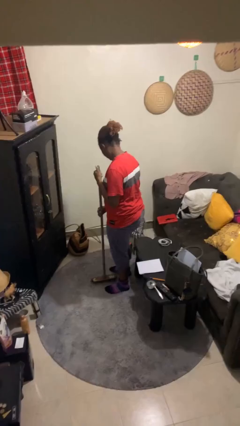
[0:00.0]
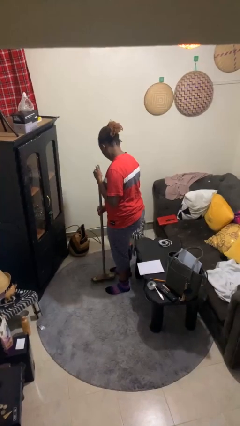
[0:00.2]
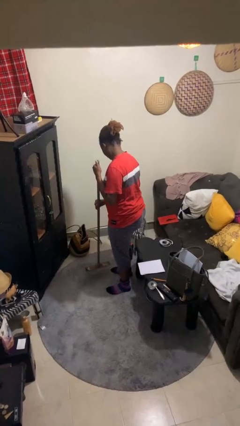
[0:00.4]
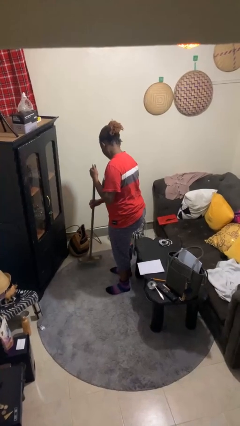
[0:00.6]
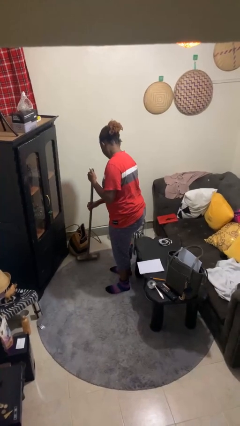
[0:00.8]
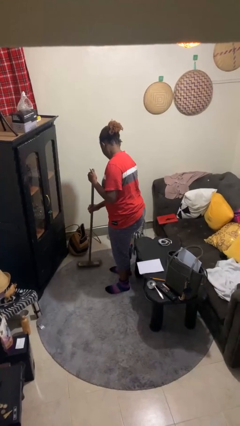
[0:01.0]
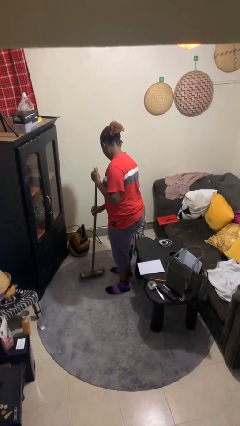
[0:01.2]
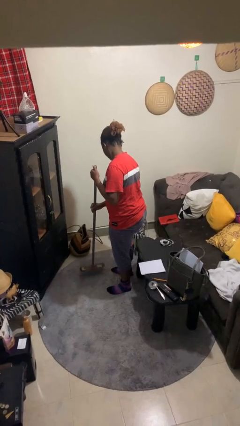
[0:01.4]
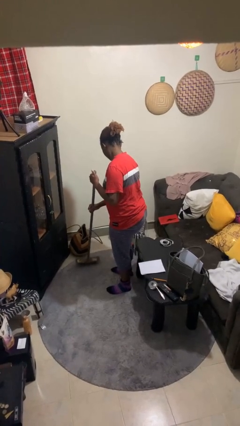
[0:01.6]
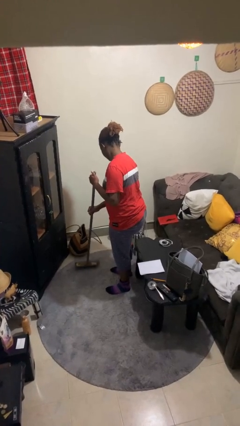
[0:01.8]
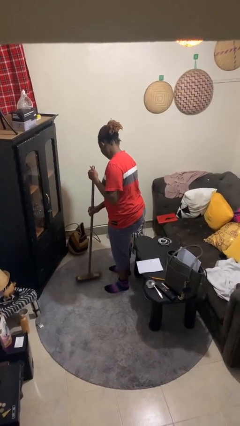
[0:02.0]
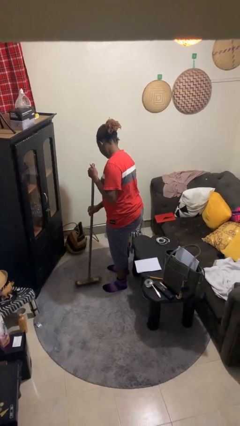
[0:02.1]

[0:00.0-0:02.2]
person sweeps floor

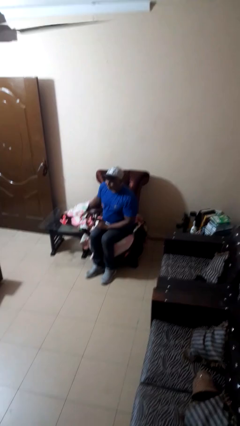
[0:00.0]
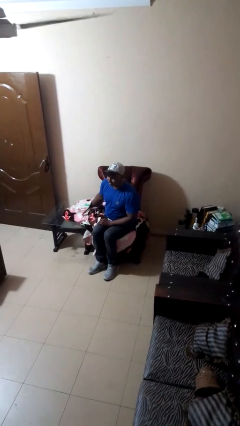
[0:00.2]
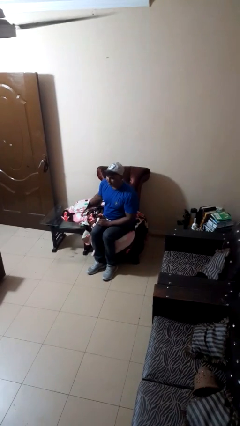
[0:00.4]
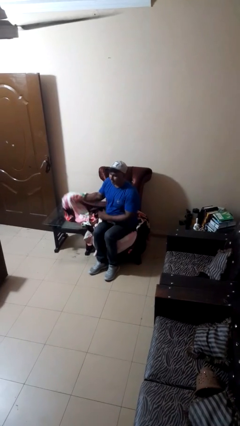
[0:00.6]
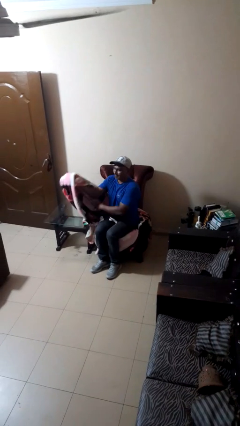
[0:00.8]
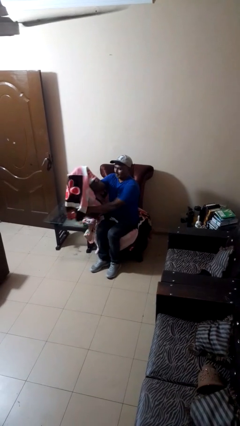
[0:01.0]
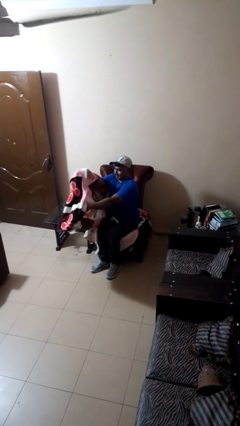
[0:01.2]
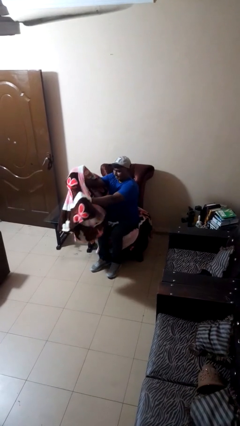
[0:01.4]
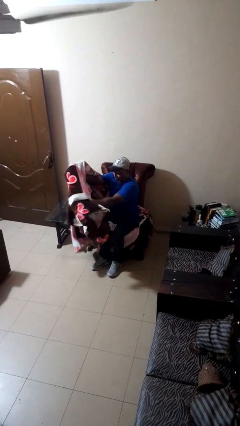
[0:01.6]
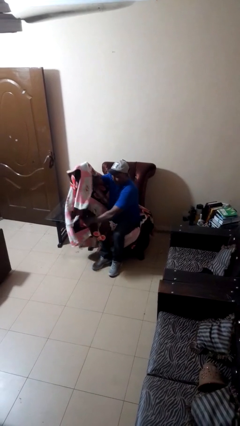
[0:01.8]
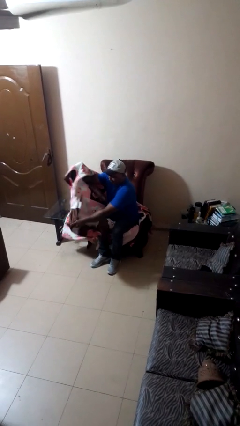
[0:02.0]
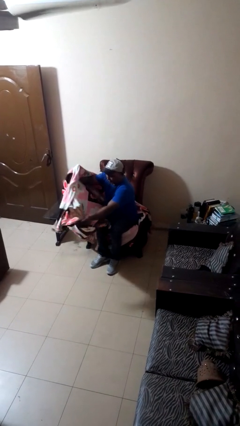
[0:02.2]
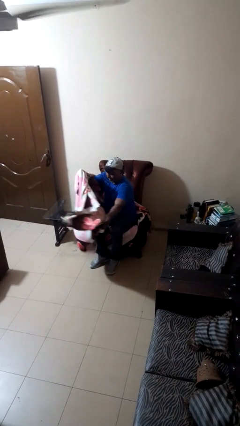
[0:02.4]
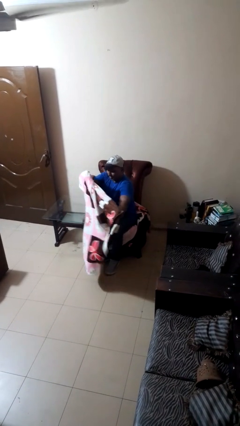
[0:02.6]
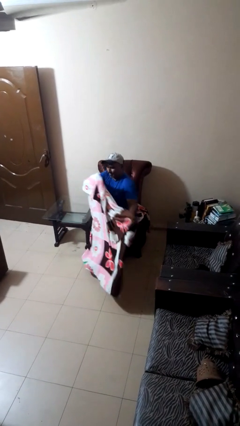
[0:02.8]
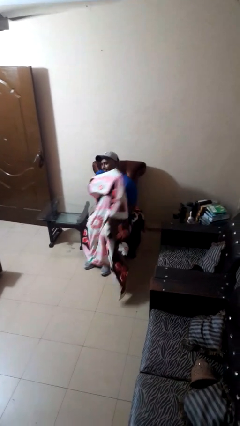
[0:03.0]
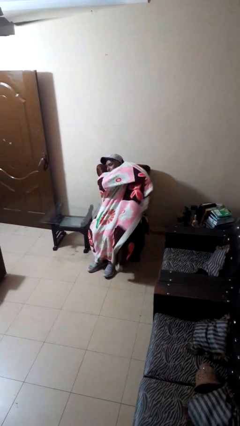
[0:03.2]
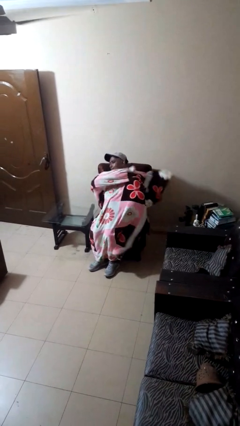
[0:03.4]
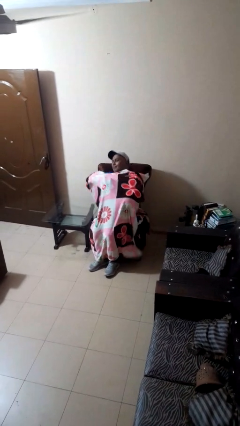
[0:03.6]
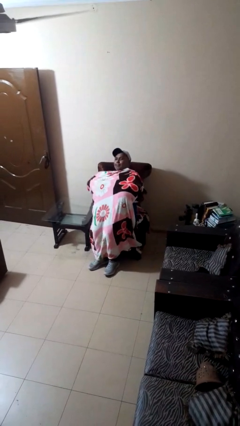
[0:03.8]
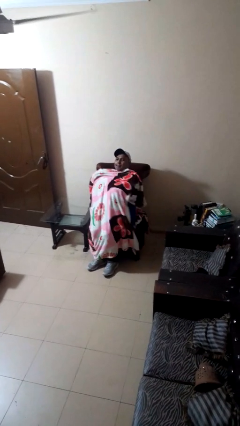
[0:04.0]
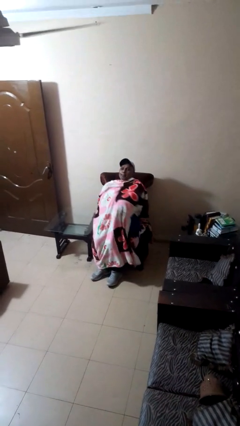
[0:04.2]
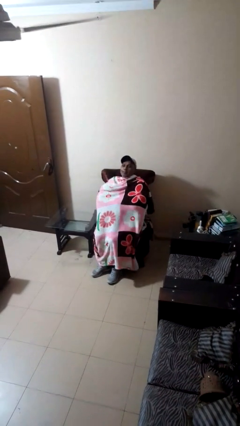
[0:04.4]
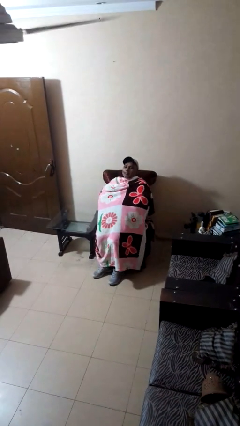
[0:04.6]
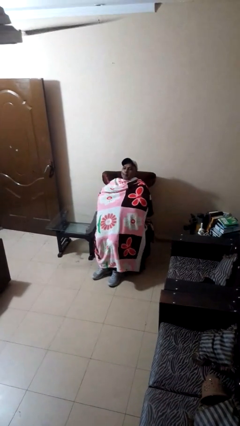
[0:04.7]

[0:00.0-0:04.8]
person covers with blanket

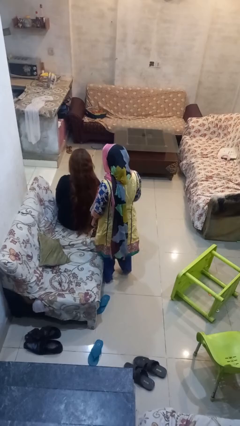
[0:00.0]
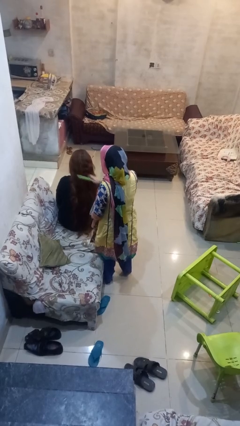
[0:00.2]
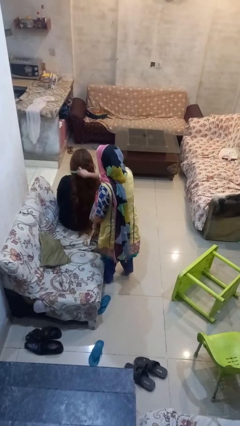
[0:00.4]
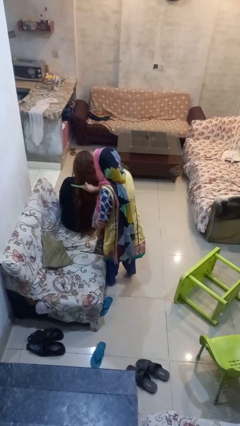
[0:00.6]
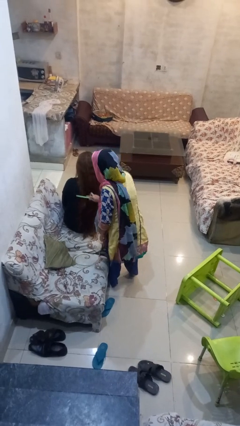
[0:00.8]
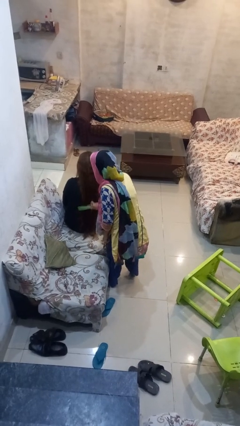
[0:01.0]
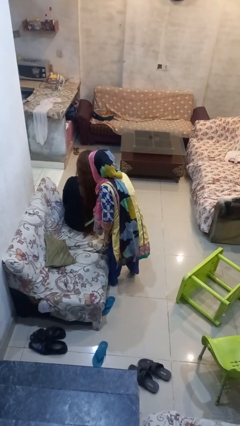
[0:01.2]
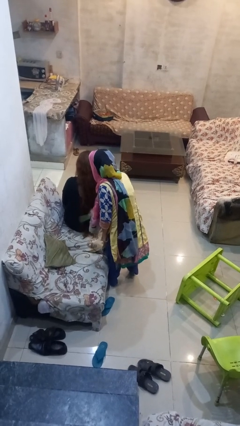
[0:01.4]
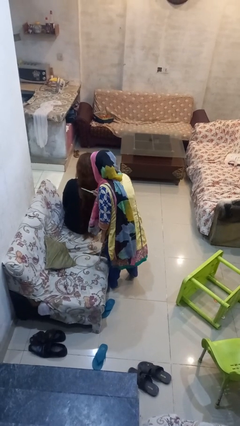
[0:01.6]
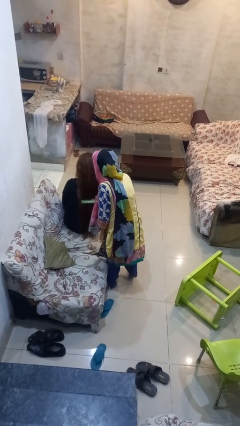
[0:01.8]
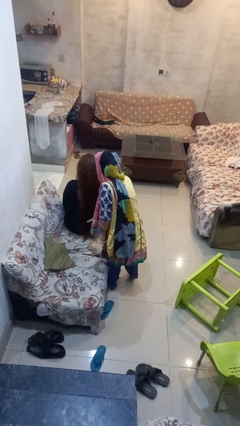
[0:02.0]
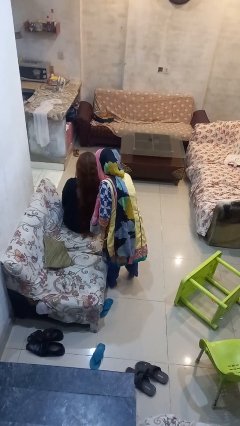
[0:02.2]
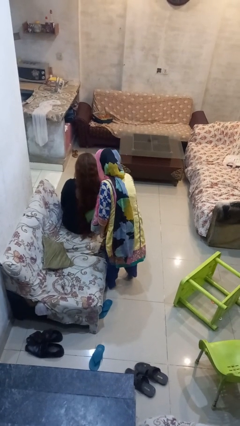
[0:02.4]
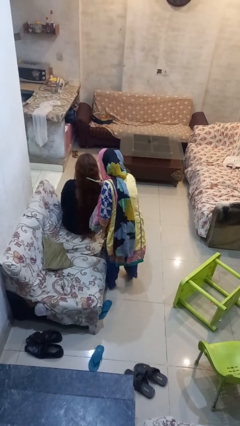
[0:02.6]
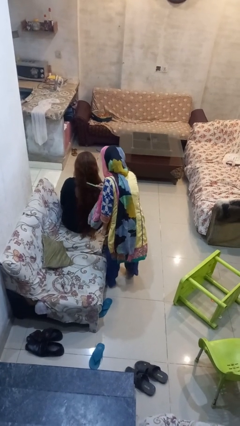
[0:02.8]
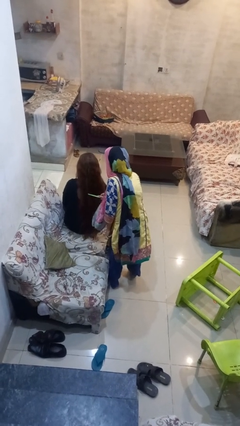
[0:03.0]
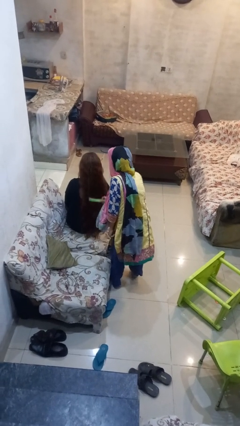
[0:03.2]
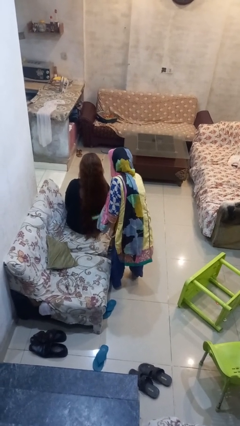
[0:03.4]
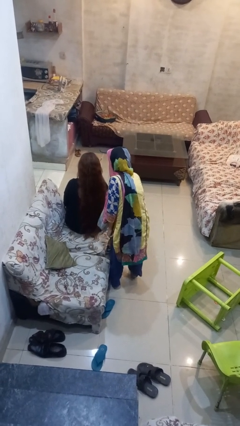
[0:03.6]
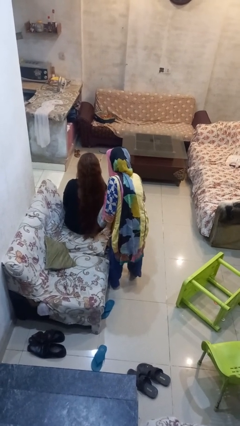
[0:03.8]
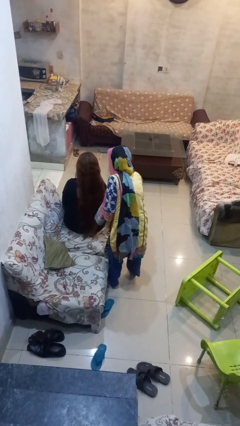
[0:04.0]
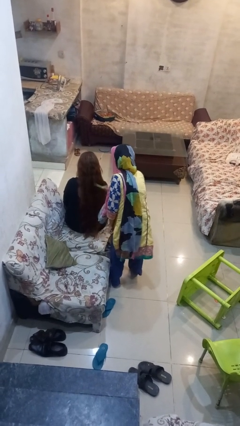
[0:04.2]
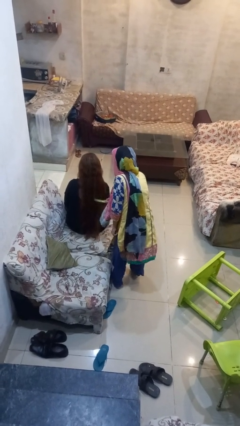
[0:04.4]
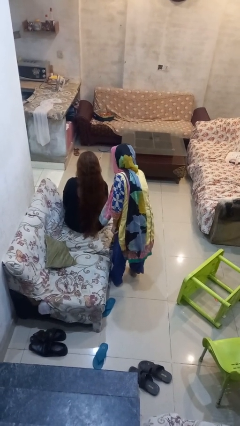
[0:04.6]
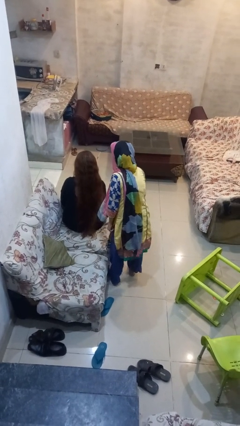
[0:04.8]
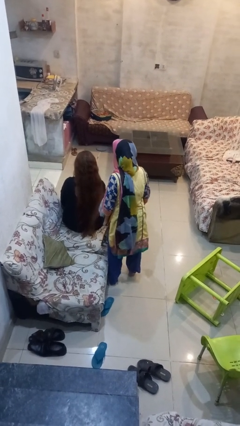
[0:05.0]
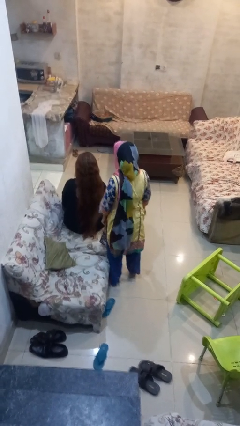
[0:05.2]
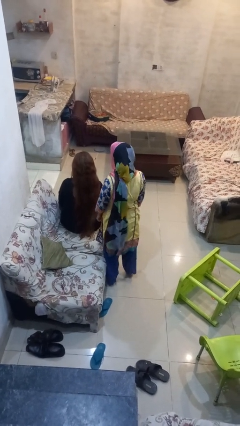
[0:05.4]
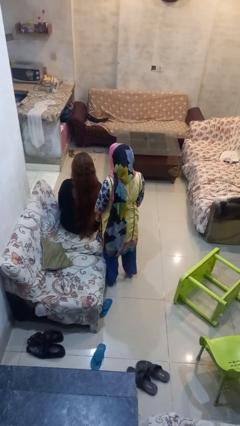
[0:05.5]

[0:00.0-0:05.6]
person brushes hair of person

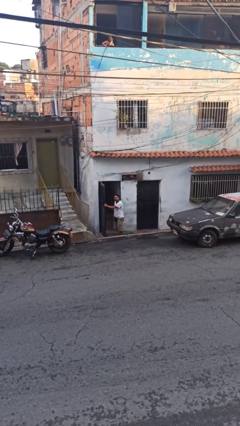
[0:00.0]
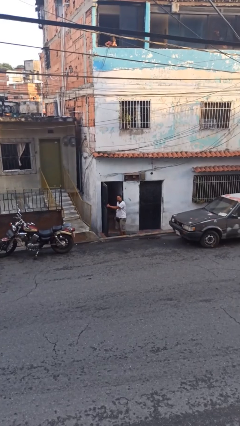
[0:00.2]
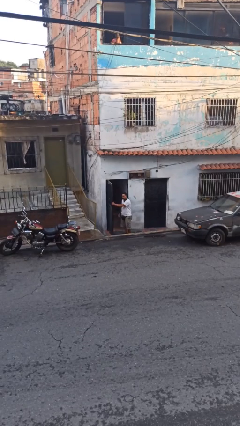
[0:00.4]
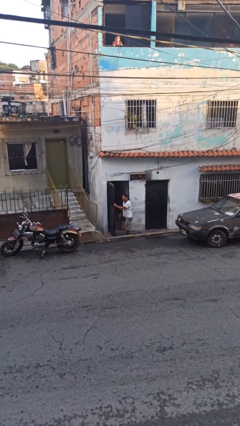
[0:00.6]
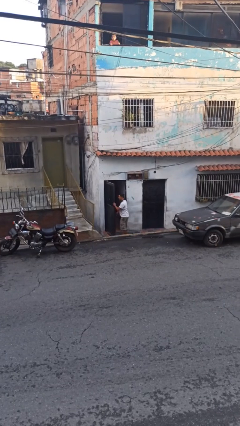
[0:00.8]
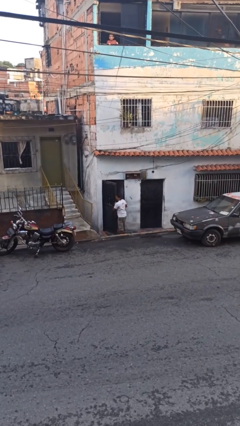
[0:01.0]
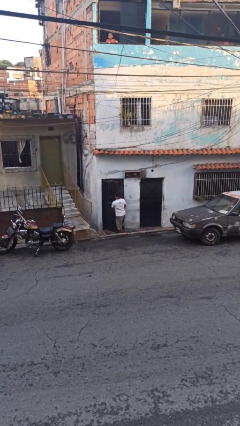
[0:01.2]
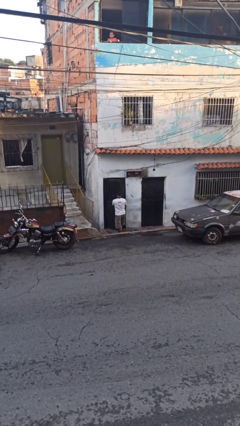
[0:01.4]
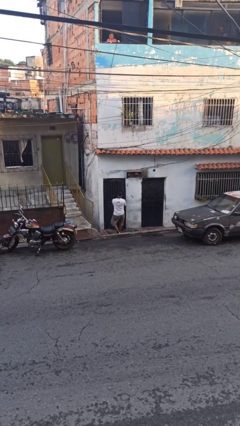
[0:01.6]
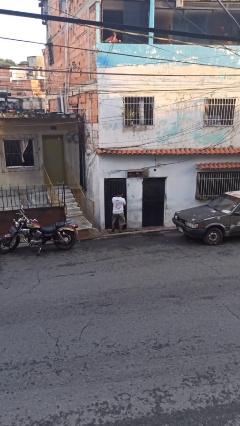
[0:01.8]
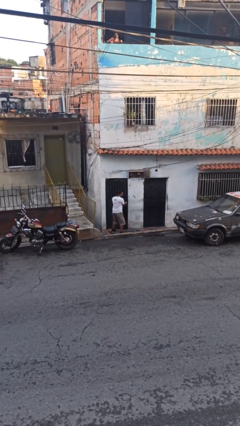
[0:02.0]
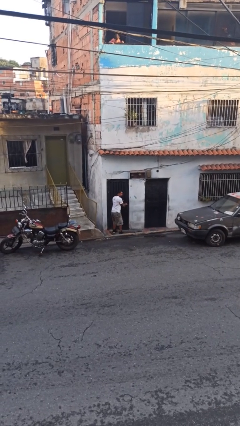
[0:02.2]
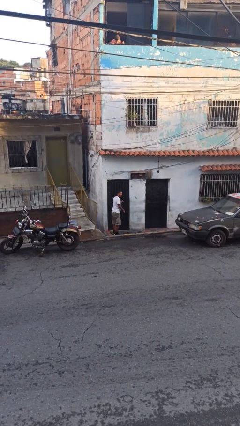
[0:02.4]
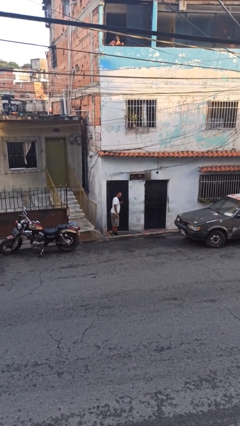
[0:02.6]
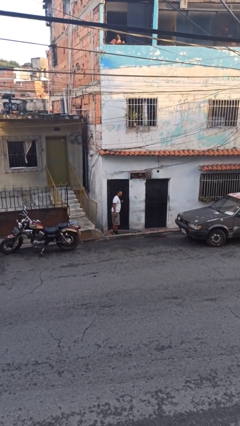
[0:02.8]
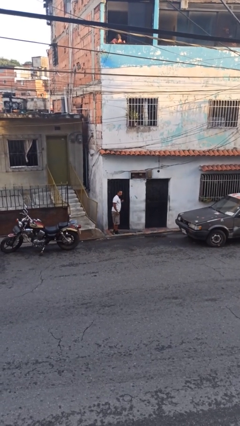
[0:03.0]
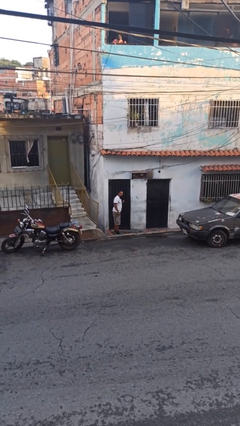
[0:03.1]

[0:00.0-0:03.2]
person closes facility door

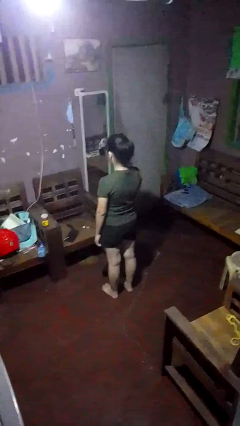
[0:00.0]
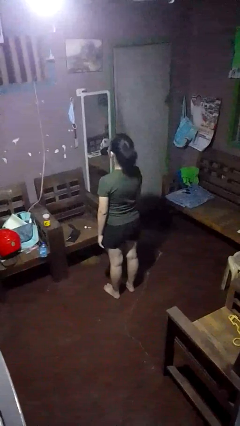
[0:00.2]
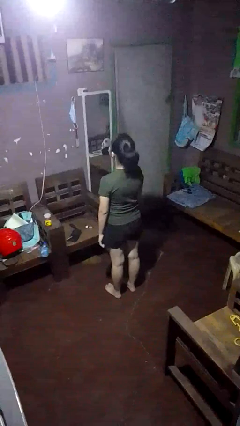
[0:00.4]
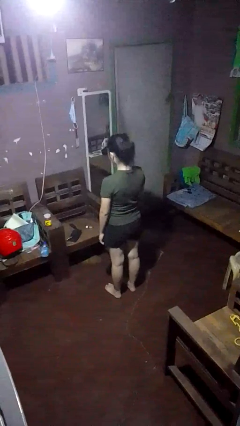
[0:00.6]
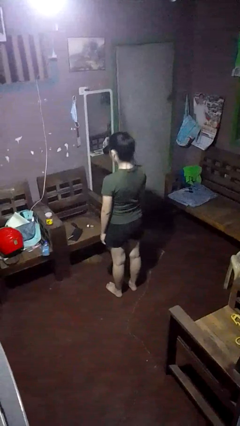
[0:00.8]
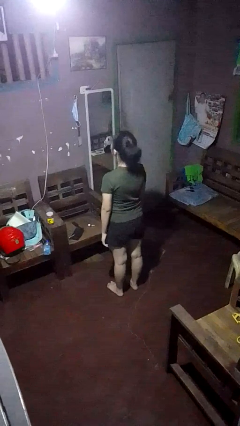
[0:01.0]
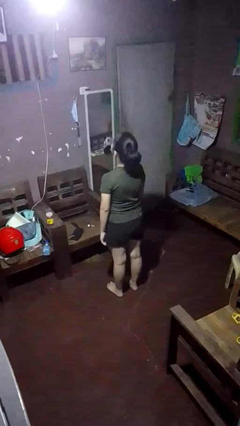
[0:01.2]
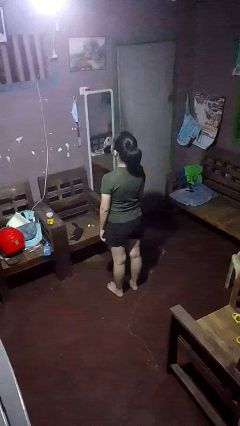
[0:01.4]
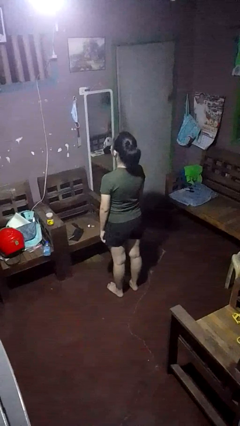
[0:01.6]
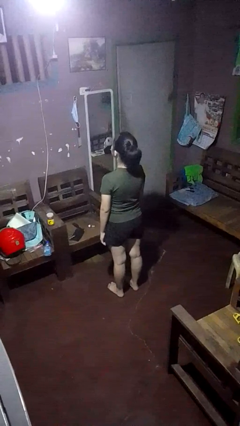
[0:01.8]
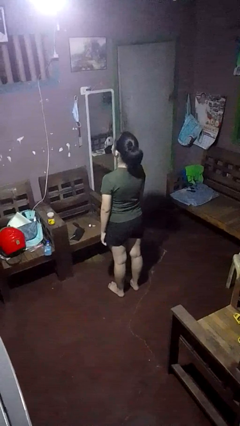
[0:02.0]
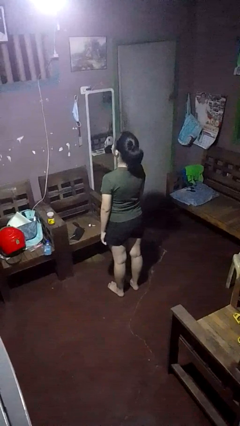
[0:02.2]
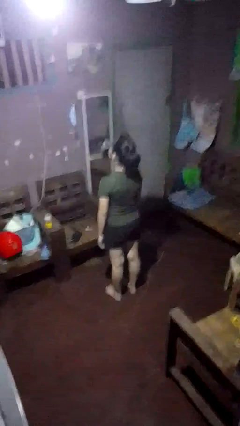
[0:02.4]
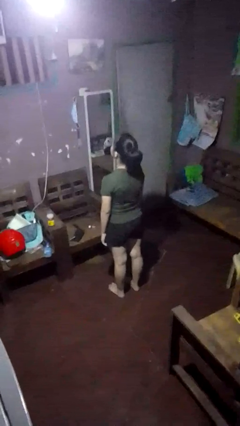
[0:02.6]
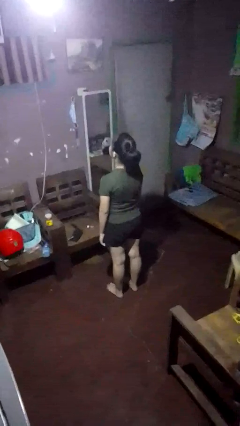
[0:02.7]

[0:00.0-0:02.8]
person nods head
